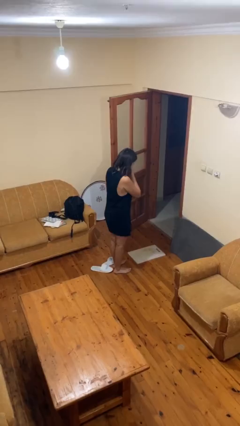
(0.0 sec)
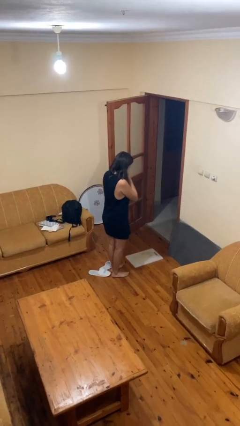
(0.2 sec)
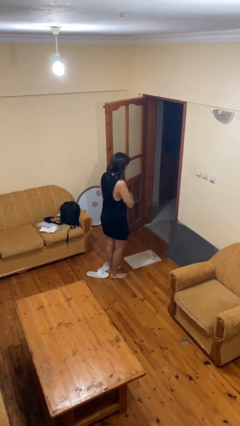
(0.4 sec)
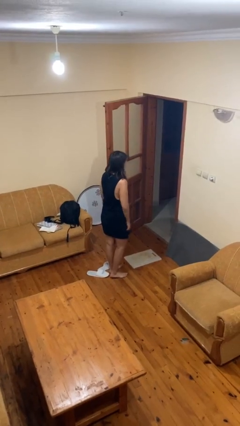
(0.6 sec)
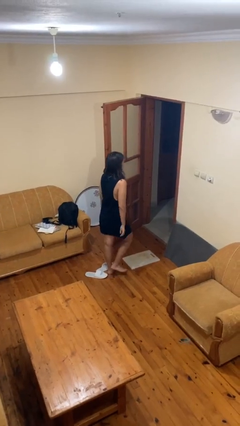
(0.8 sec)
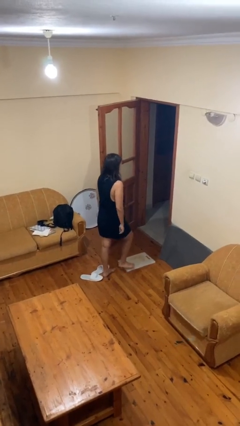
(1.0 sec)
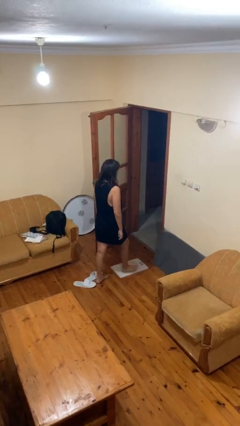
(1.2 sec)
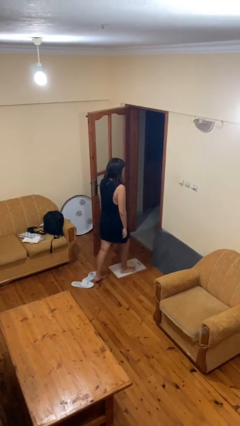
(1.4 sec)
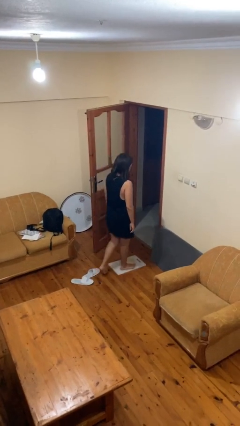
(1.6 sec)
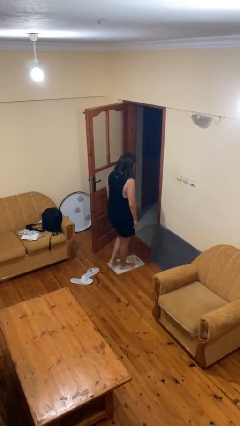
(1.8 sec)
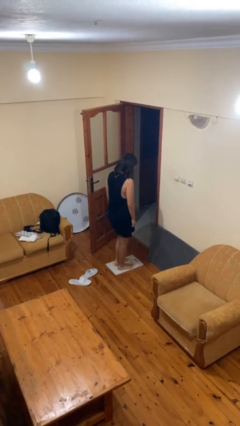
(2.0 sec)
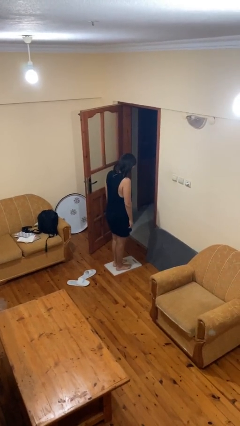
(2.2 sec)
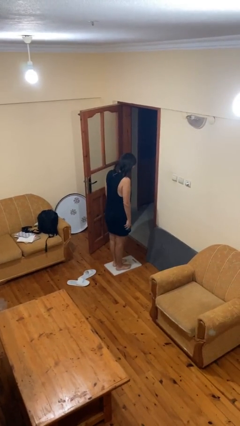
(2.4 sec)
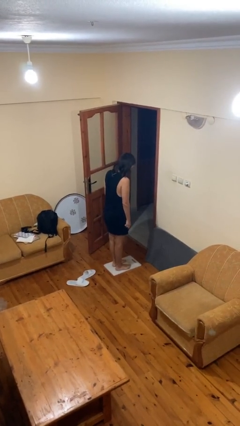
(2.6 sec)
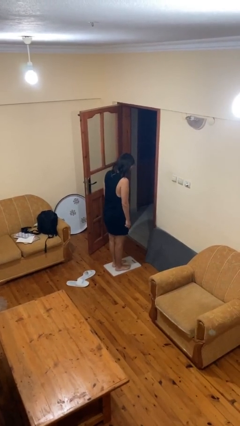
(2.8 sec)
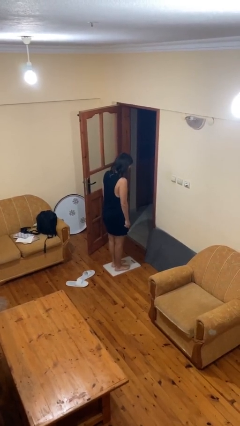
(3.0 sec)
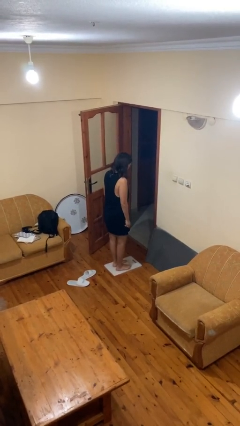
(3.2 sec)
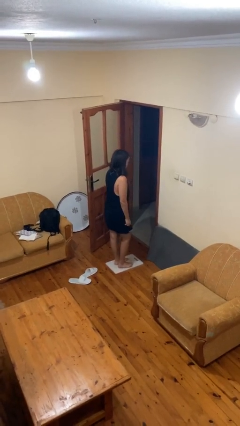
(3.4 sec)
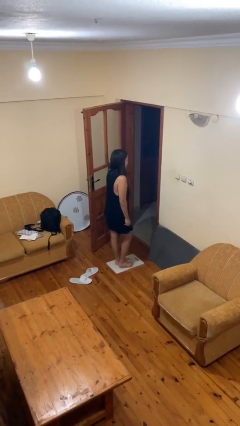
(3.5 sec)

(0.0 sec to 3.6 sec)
person uses bodyweight scale

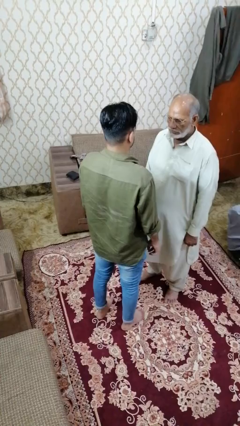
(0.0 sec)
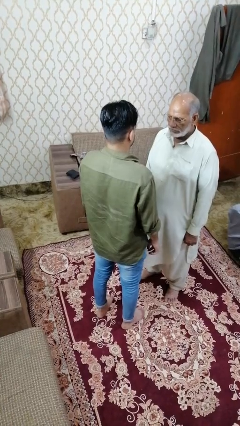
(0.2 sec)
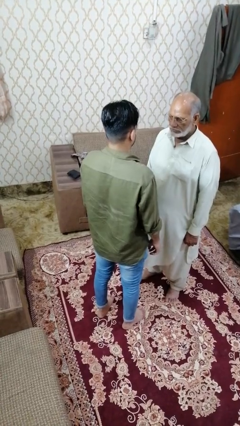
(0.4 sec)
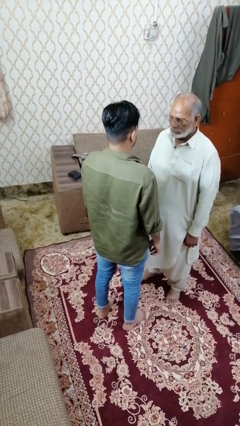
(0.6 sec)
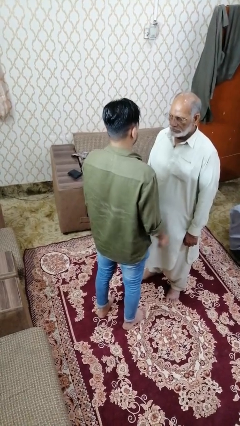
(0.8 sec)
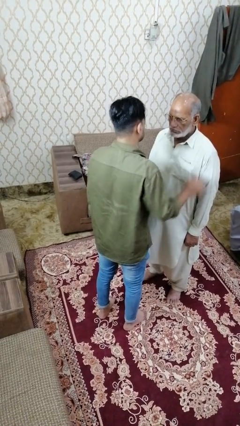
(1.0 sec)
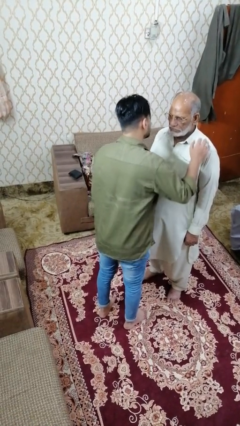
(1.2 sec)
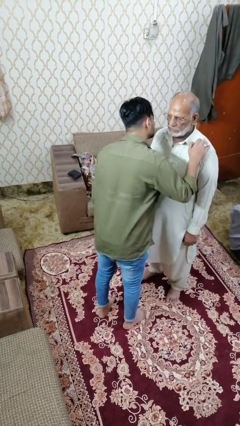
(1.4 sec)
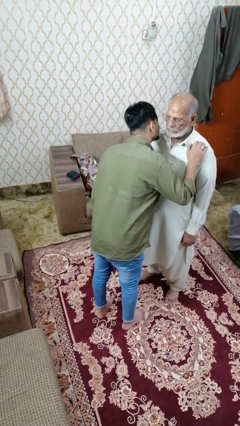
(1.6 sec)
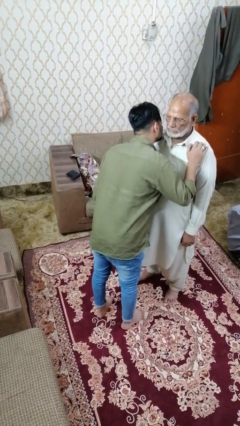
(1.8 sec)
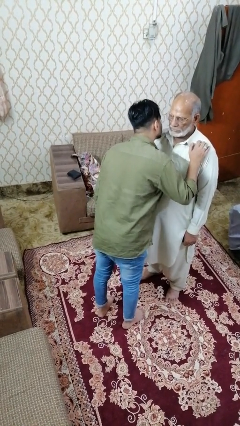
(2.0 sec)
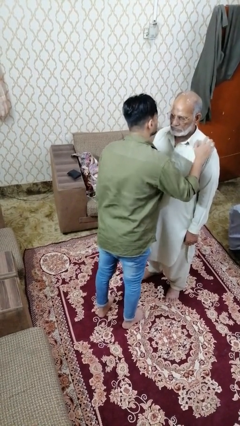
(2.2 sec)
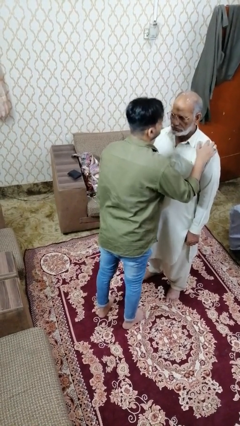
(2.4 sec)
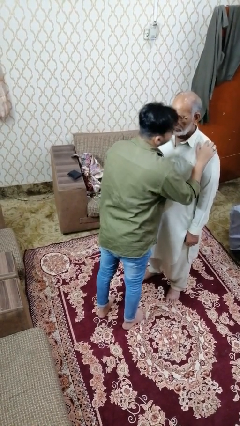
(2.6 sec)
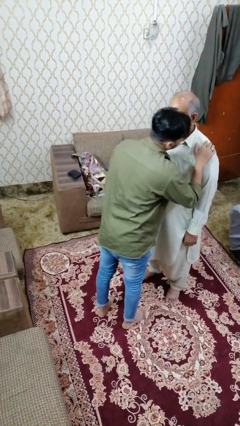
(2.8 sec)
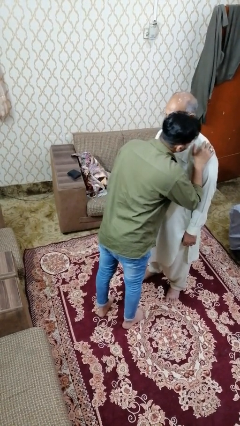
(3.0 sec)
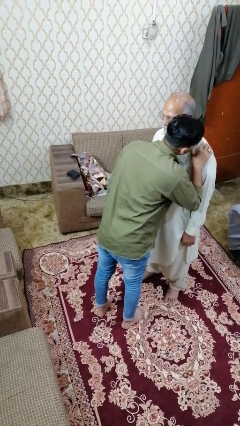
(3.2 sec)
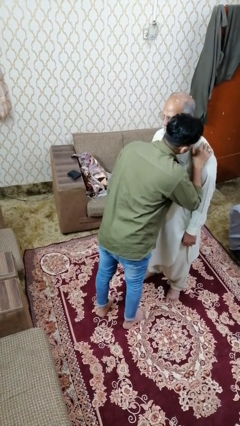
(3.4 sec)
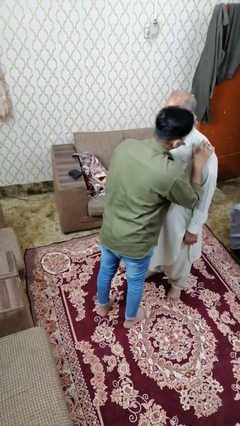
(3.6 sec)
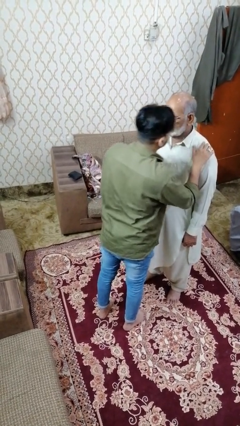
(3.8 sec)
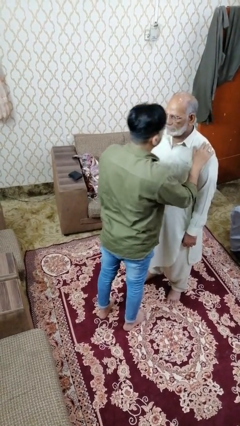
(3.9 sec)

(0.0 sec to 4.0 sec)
person kisses cheek of person

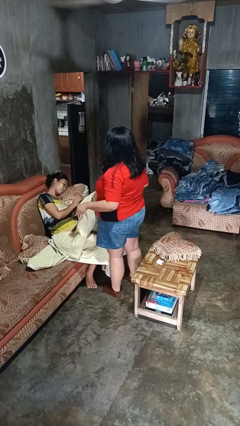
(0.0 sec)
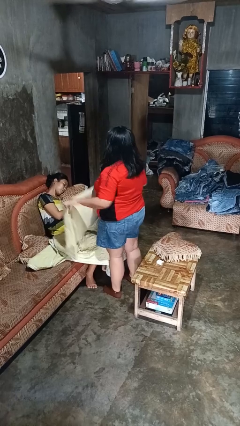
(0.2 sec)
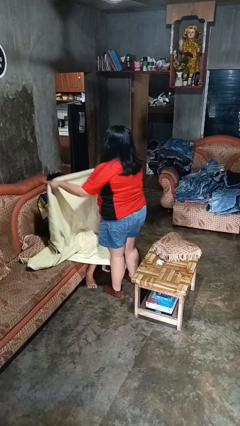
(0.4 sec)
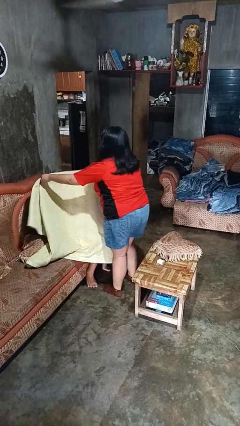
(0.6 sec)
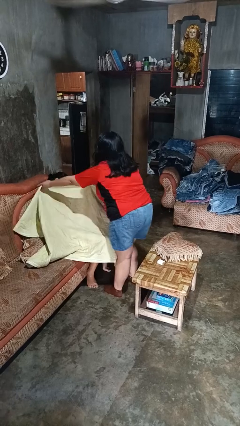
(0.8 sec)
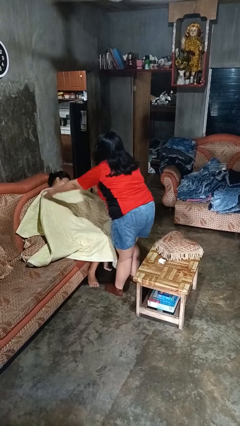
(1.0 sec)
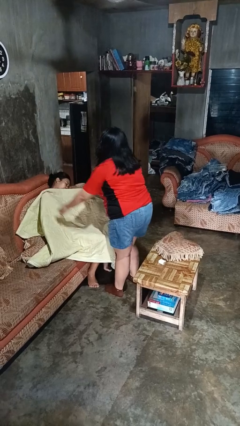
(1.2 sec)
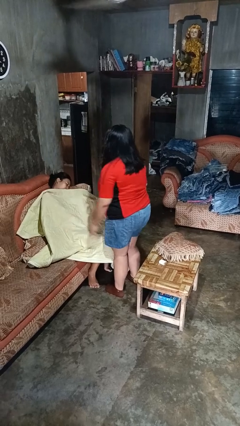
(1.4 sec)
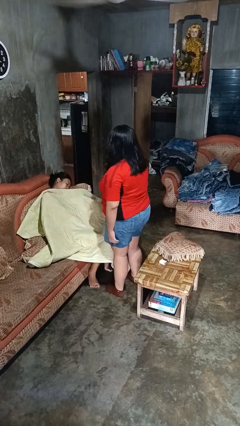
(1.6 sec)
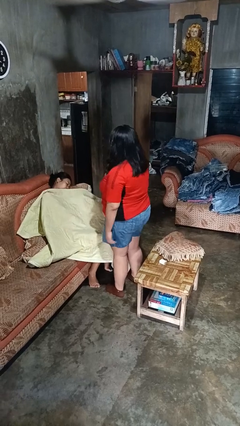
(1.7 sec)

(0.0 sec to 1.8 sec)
person covers friend with blanket

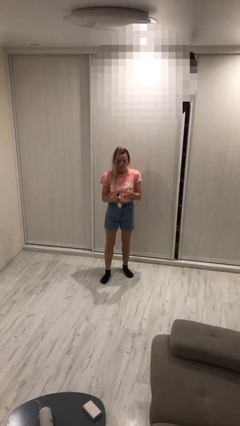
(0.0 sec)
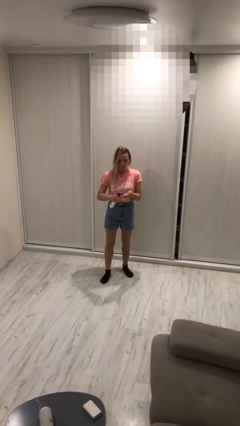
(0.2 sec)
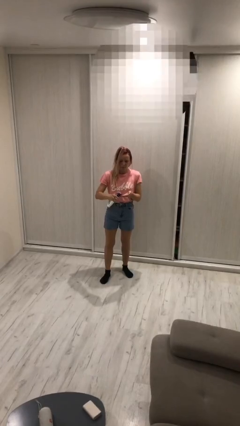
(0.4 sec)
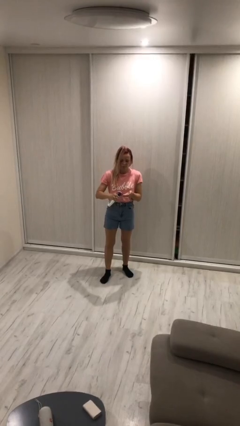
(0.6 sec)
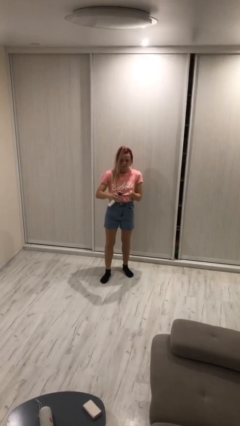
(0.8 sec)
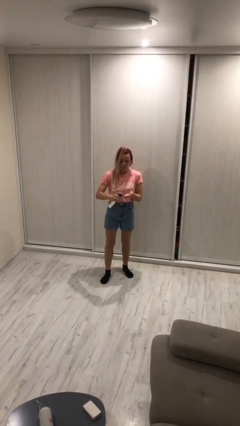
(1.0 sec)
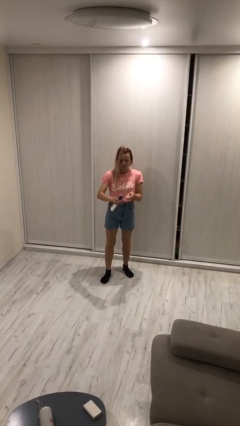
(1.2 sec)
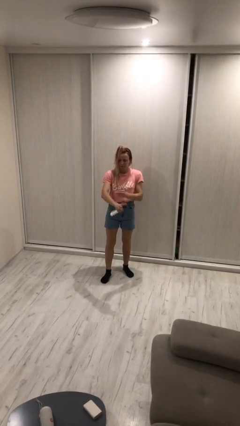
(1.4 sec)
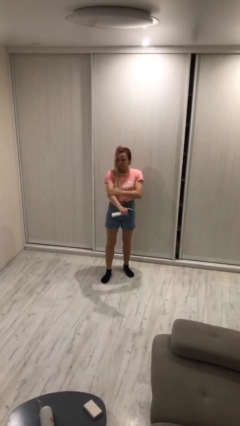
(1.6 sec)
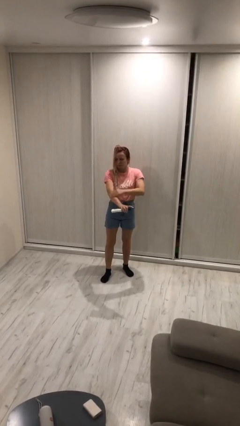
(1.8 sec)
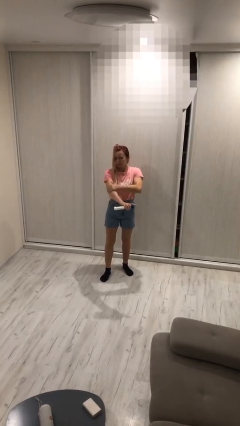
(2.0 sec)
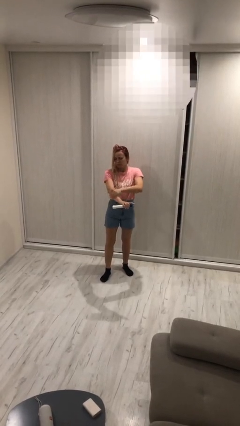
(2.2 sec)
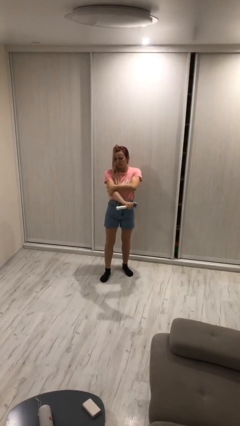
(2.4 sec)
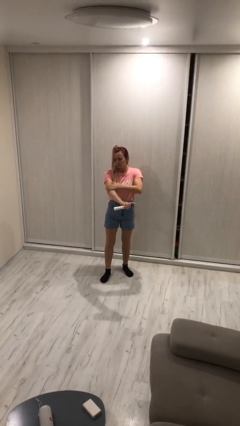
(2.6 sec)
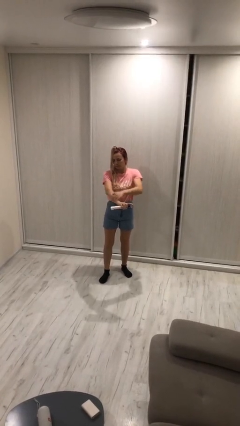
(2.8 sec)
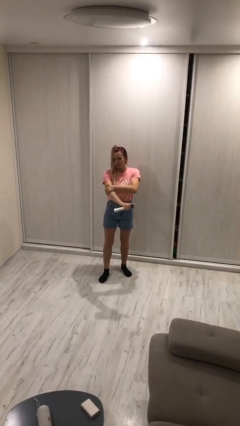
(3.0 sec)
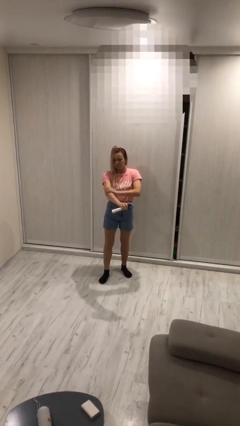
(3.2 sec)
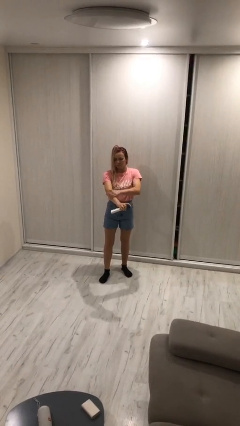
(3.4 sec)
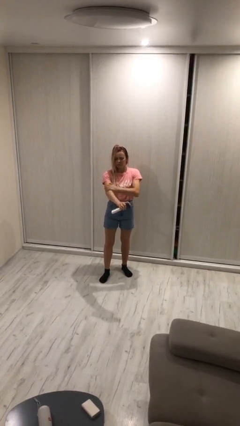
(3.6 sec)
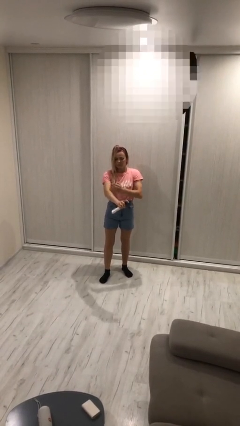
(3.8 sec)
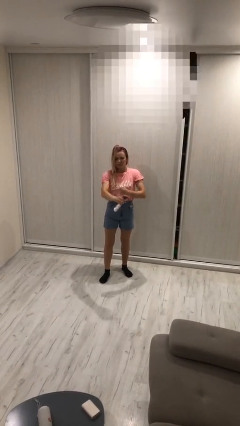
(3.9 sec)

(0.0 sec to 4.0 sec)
person applies sunscreen

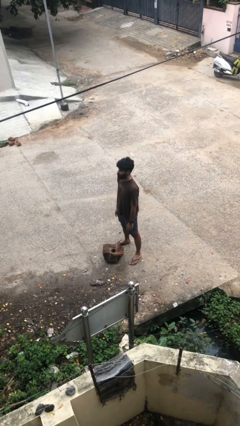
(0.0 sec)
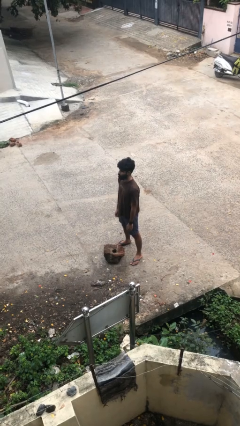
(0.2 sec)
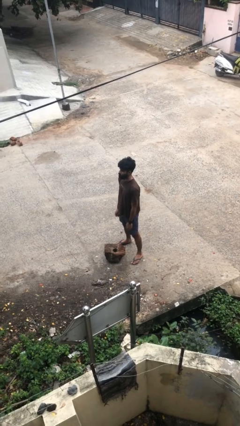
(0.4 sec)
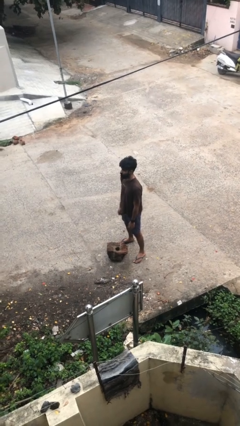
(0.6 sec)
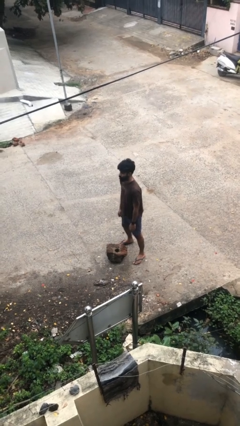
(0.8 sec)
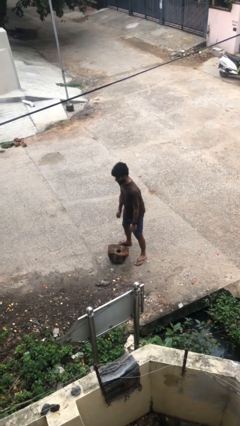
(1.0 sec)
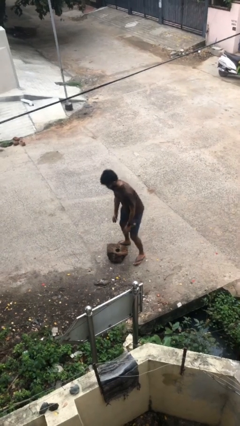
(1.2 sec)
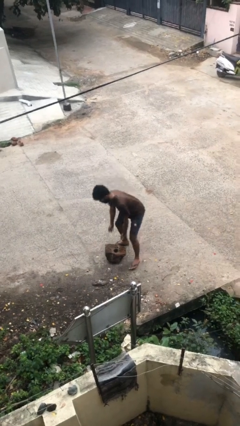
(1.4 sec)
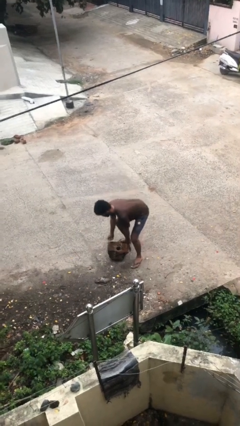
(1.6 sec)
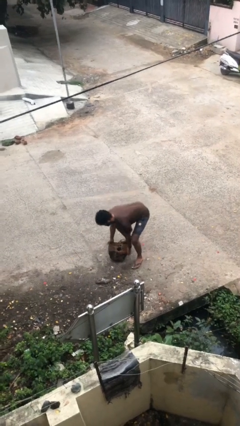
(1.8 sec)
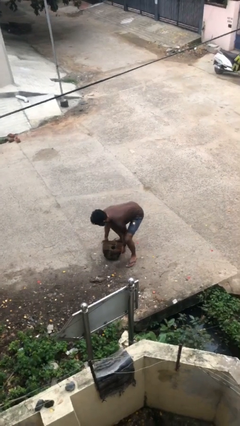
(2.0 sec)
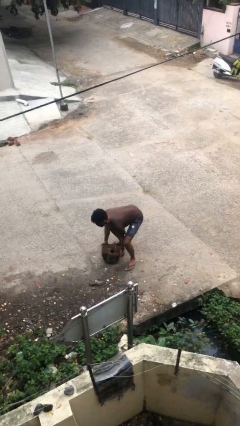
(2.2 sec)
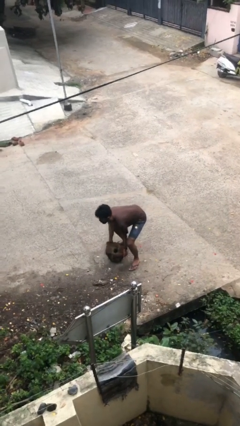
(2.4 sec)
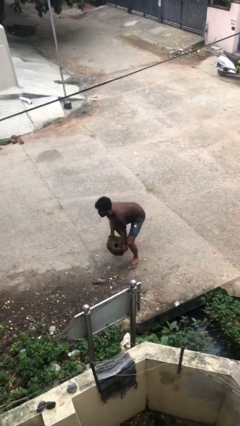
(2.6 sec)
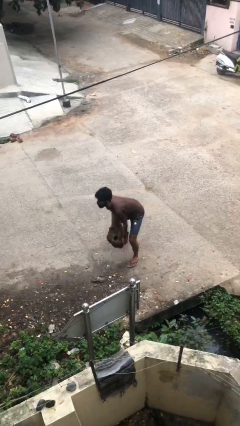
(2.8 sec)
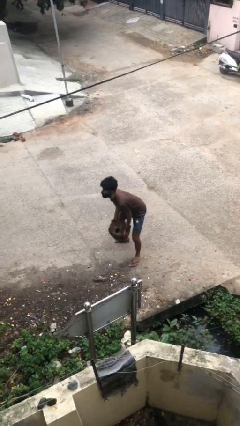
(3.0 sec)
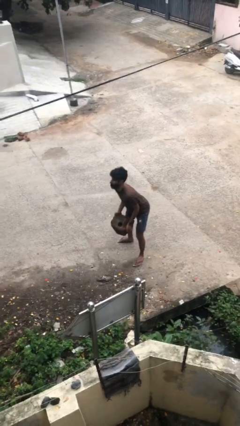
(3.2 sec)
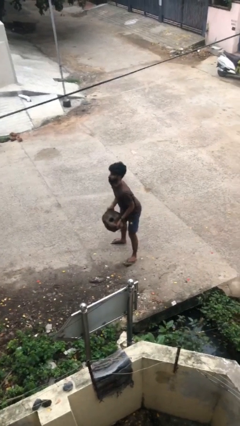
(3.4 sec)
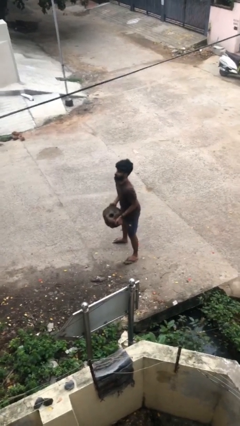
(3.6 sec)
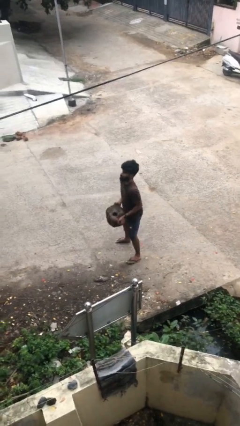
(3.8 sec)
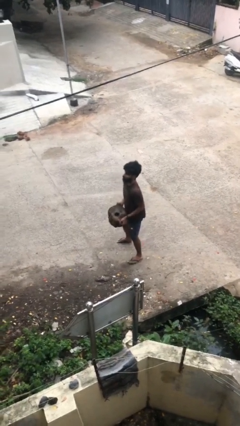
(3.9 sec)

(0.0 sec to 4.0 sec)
person picks up object from floor

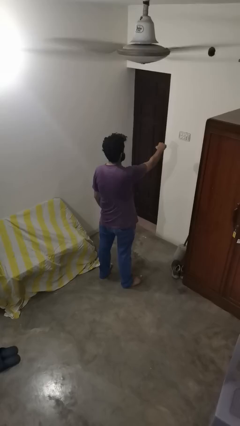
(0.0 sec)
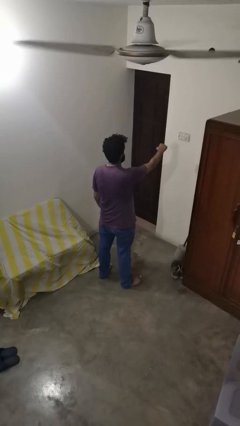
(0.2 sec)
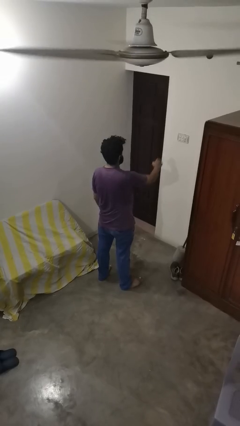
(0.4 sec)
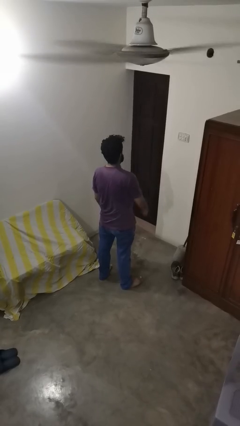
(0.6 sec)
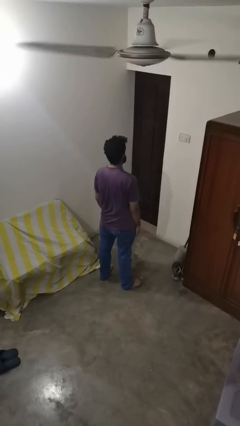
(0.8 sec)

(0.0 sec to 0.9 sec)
person punches
